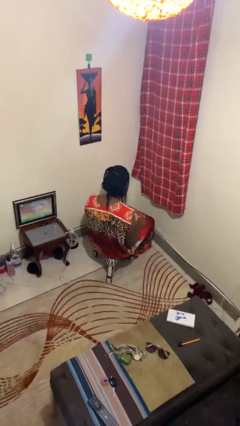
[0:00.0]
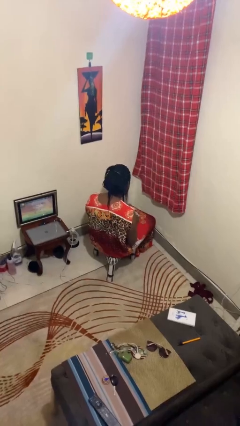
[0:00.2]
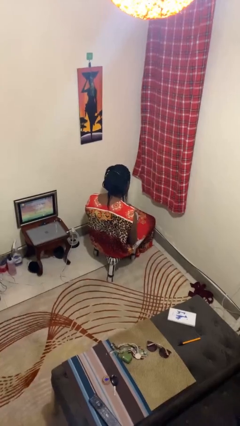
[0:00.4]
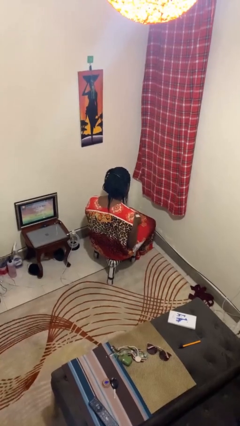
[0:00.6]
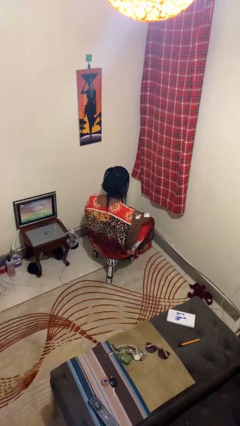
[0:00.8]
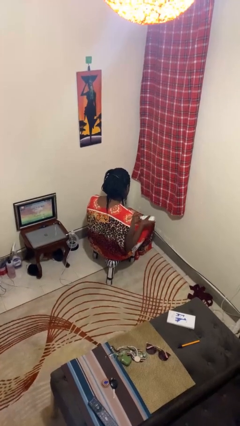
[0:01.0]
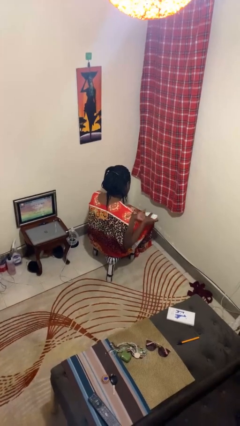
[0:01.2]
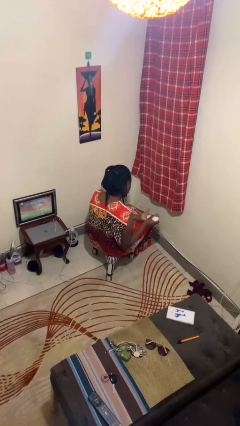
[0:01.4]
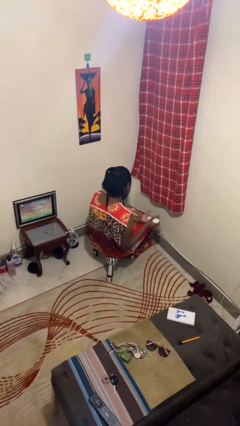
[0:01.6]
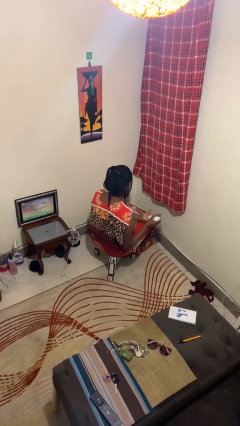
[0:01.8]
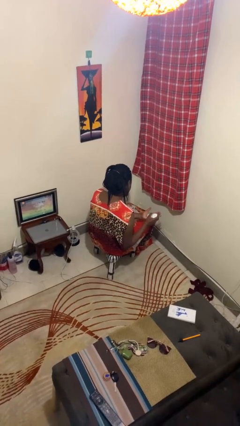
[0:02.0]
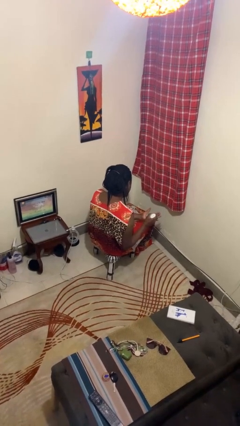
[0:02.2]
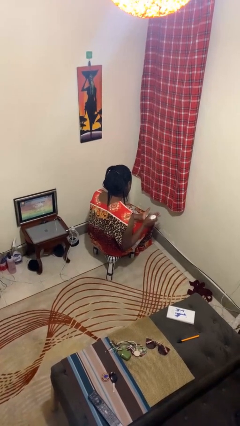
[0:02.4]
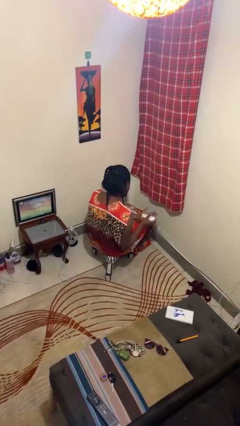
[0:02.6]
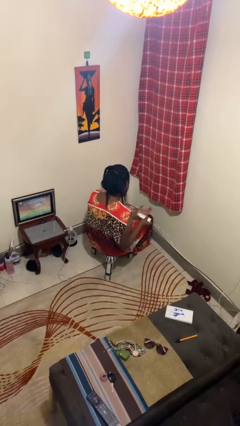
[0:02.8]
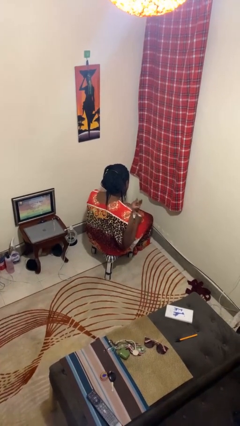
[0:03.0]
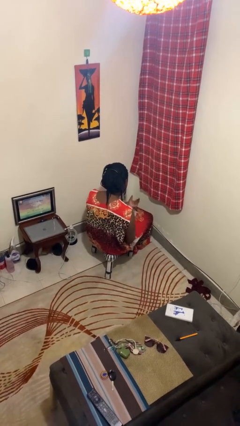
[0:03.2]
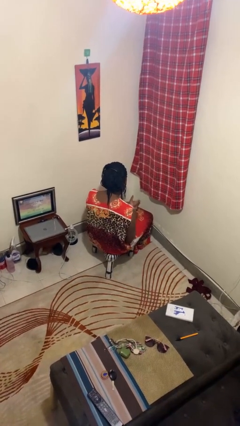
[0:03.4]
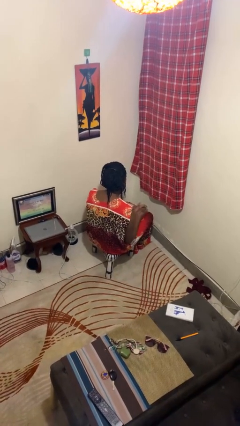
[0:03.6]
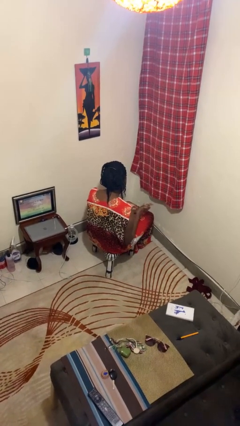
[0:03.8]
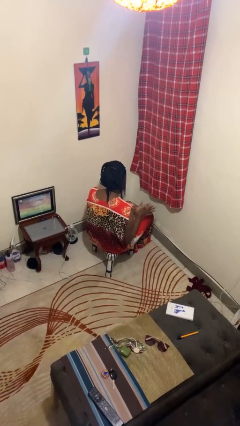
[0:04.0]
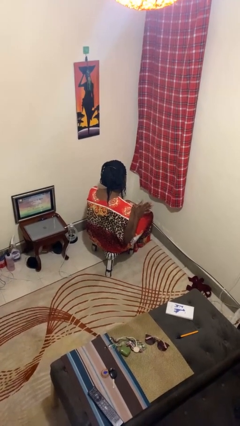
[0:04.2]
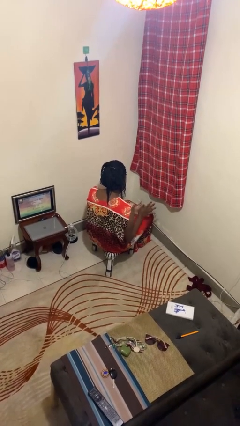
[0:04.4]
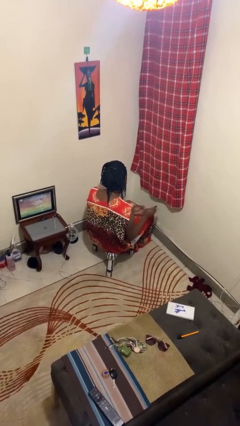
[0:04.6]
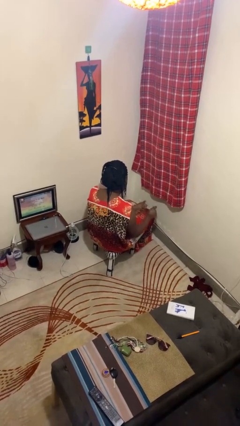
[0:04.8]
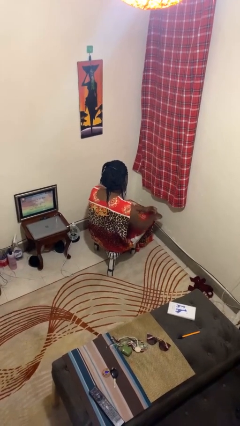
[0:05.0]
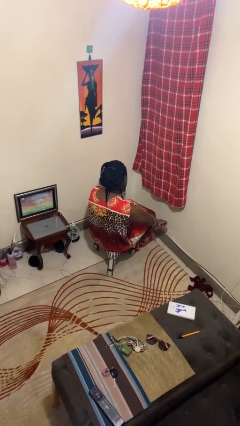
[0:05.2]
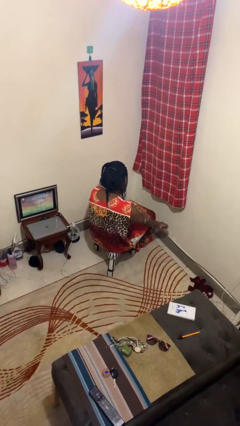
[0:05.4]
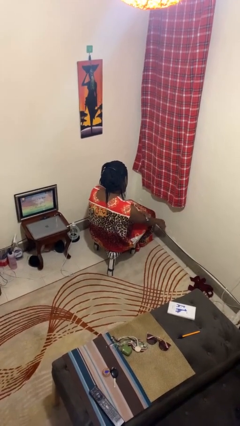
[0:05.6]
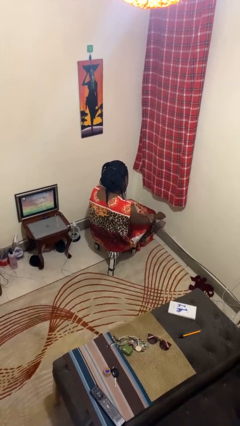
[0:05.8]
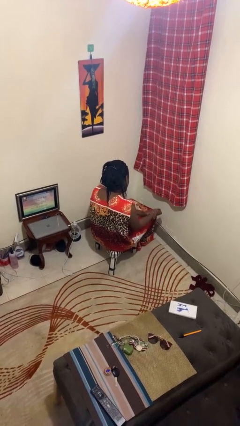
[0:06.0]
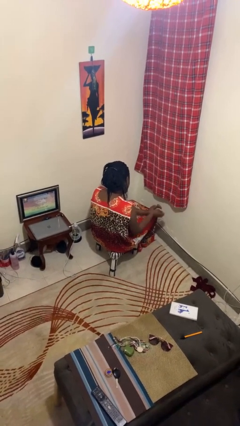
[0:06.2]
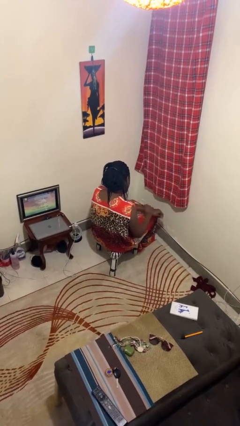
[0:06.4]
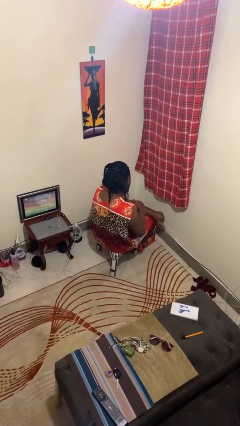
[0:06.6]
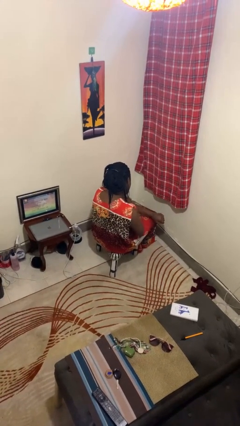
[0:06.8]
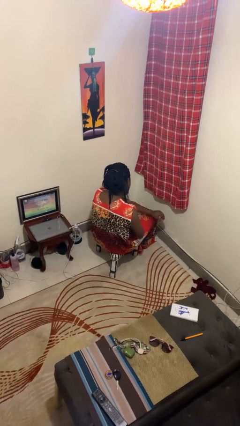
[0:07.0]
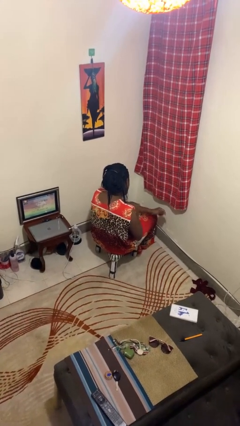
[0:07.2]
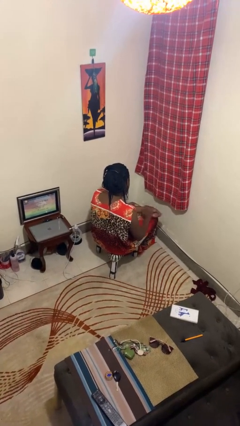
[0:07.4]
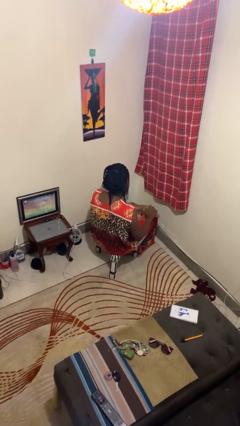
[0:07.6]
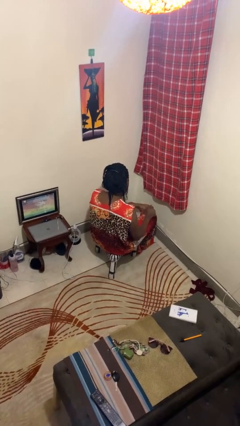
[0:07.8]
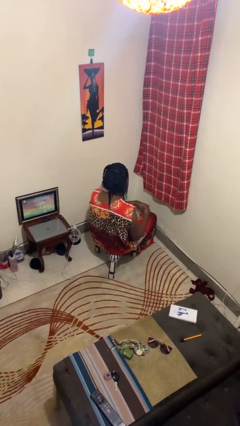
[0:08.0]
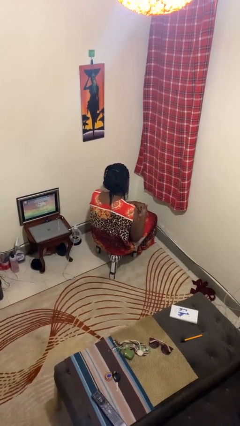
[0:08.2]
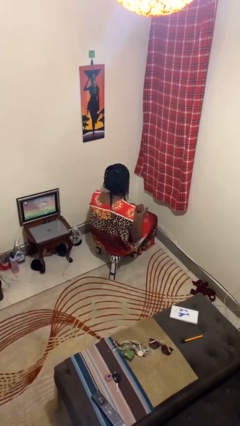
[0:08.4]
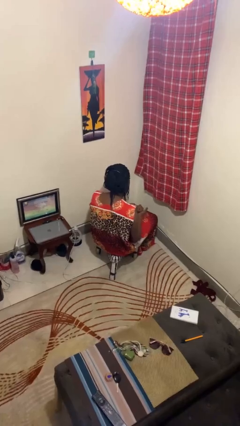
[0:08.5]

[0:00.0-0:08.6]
person applies sunscreen

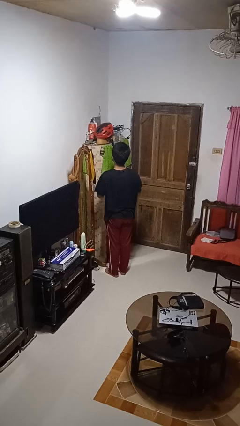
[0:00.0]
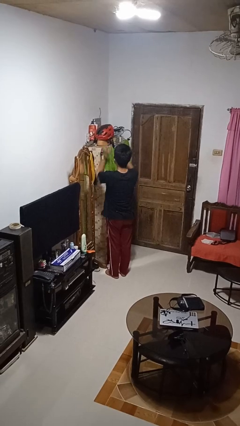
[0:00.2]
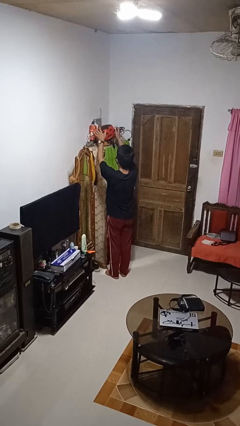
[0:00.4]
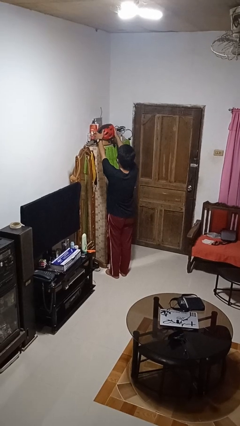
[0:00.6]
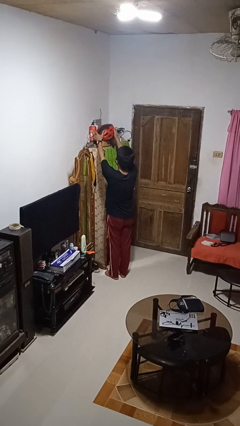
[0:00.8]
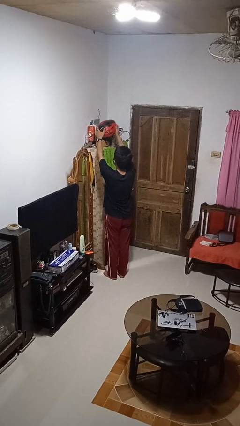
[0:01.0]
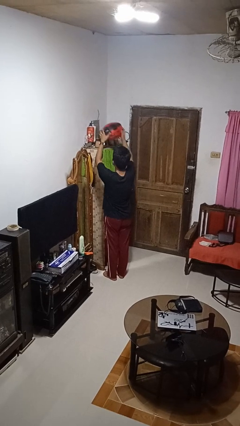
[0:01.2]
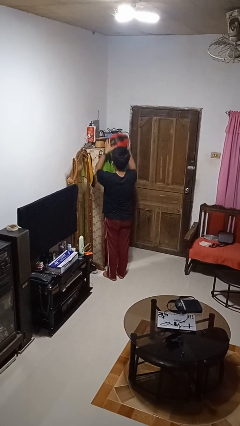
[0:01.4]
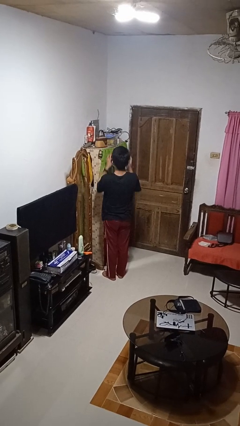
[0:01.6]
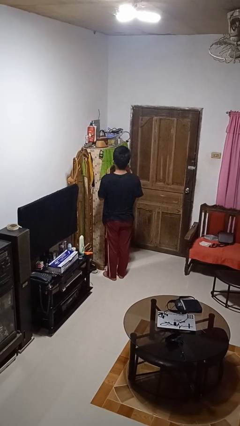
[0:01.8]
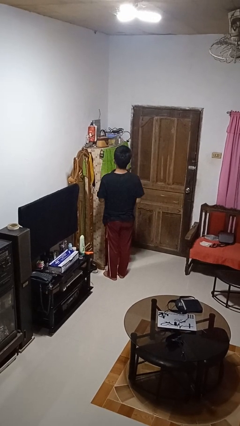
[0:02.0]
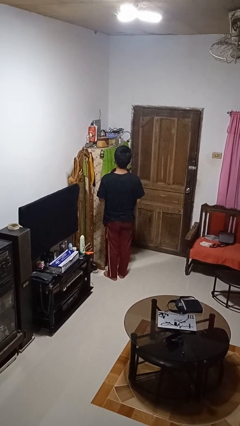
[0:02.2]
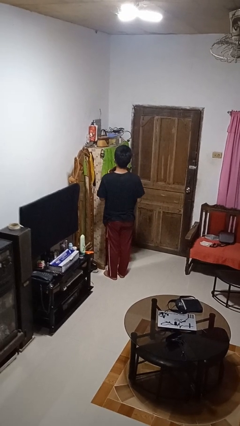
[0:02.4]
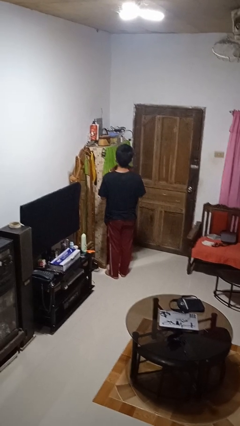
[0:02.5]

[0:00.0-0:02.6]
person picks up object from shelf

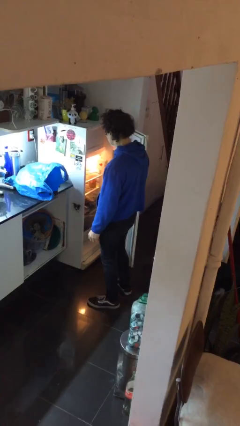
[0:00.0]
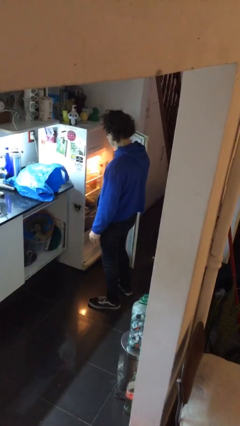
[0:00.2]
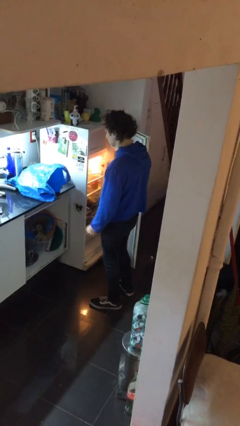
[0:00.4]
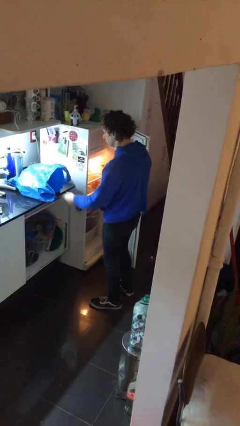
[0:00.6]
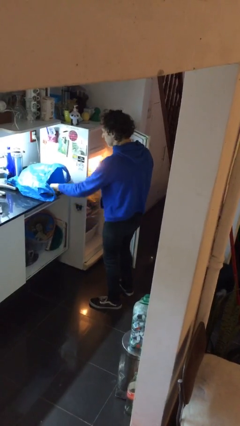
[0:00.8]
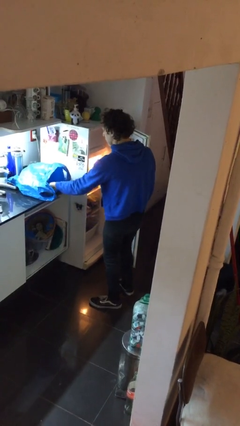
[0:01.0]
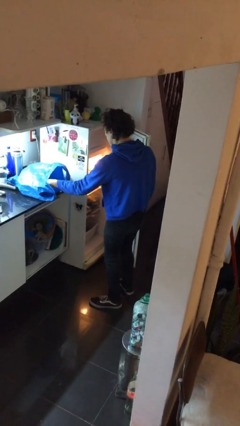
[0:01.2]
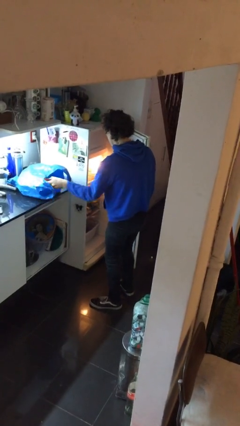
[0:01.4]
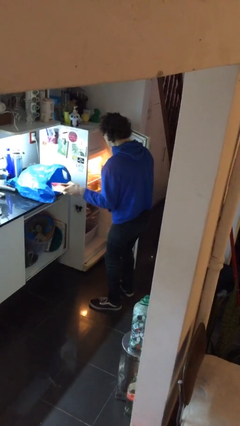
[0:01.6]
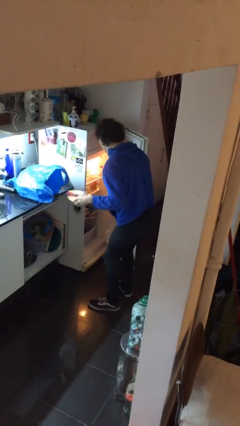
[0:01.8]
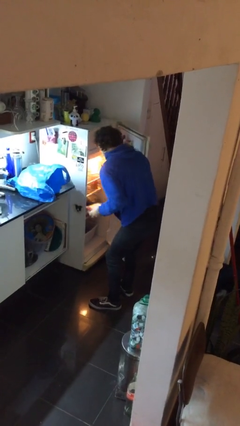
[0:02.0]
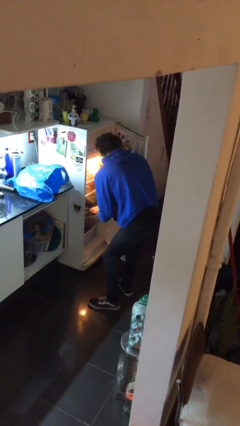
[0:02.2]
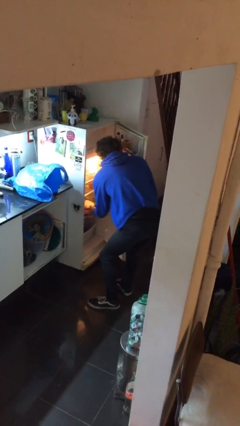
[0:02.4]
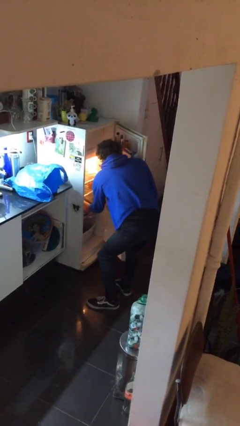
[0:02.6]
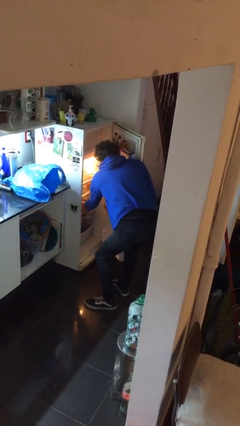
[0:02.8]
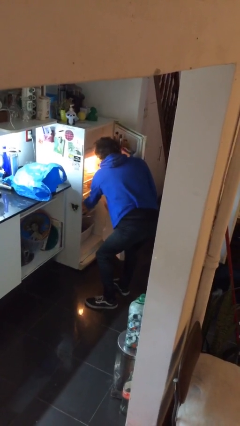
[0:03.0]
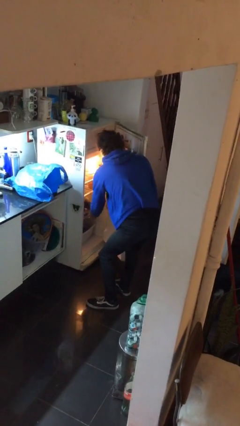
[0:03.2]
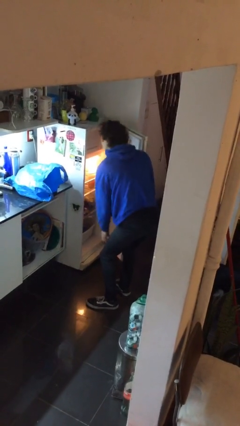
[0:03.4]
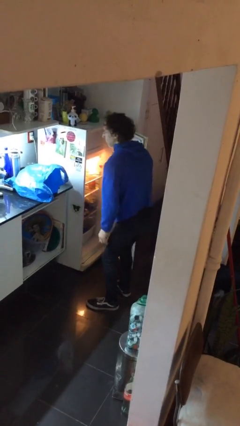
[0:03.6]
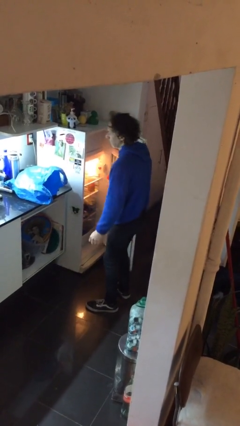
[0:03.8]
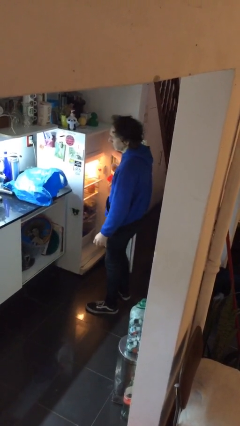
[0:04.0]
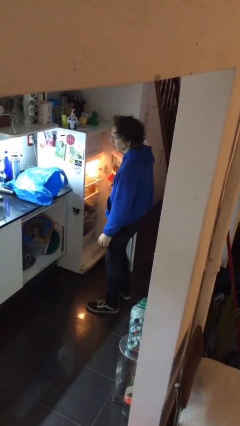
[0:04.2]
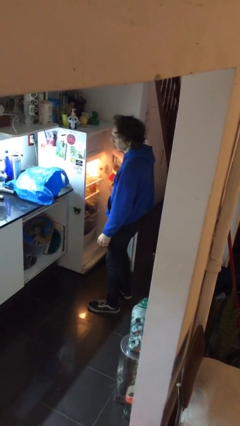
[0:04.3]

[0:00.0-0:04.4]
person loads groceries into refrigerator

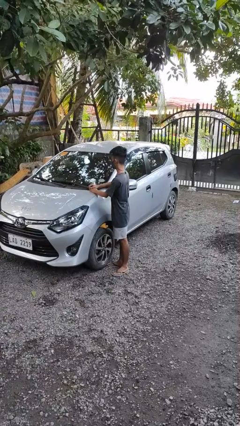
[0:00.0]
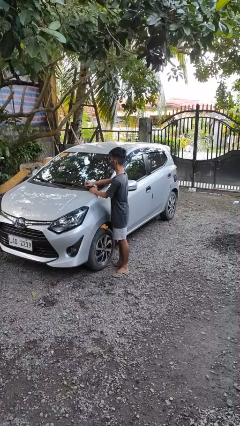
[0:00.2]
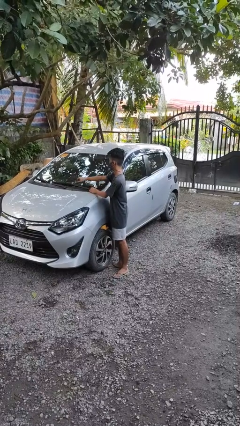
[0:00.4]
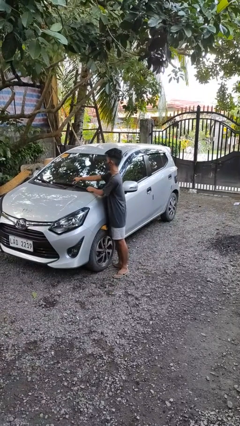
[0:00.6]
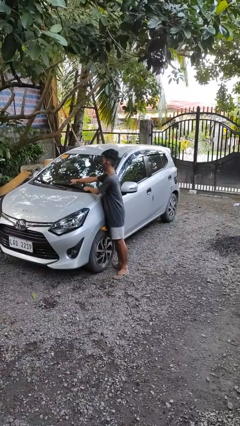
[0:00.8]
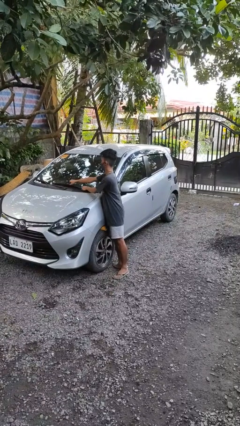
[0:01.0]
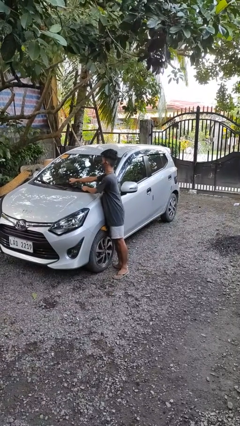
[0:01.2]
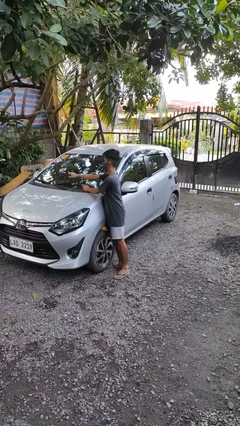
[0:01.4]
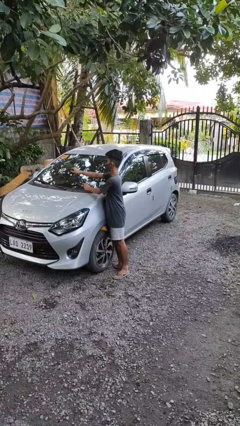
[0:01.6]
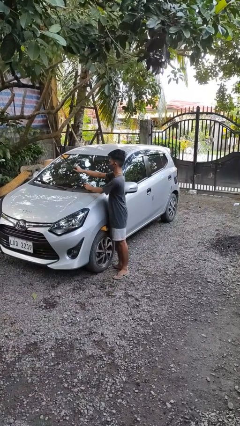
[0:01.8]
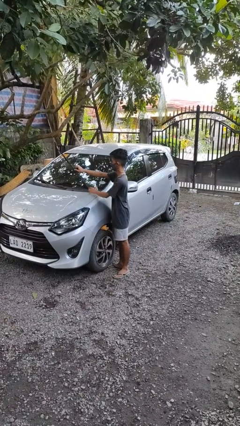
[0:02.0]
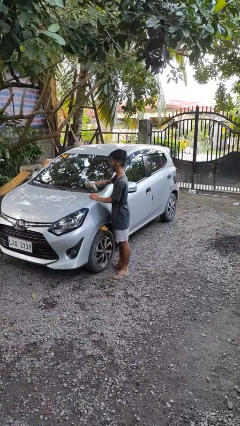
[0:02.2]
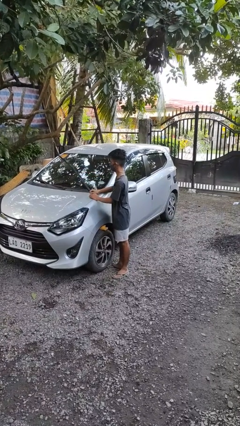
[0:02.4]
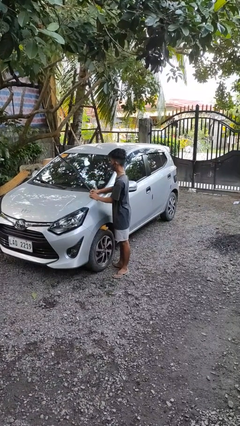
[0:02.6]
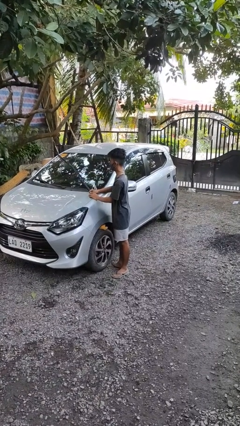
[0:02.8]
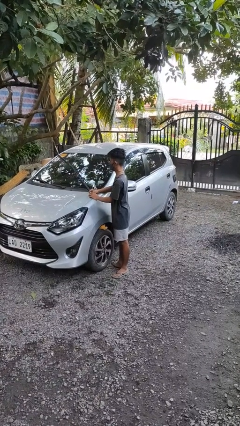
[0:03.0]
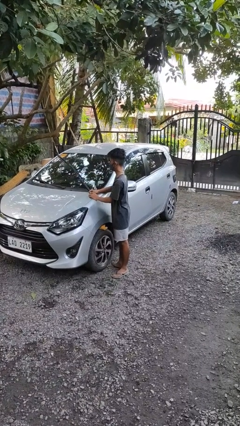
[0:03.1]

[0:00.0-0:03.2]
person flips up car wipers
